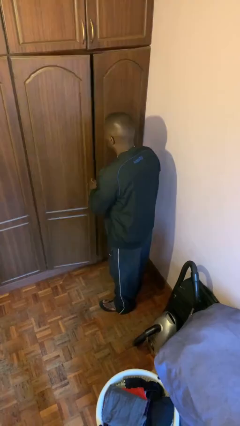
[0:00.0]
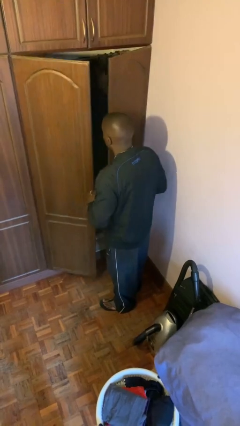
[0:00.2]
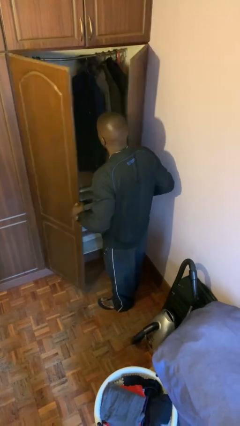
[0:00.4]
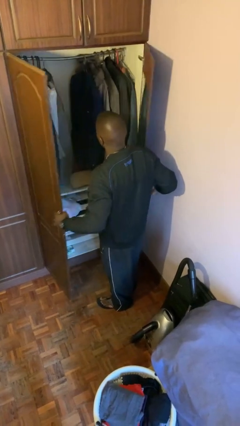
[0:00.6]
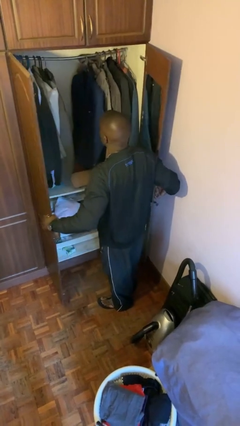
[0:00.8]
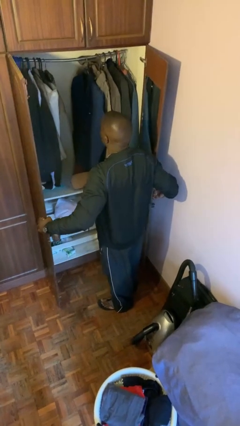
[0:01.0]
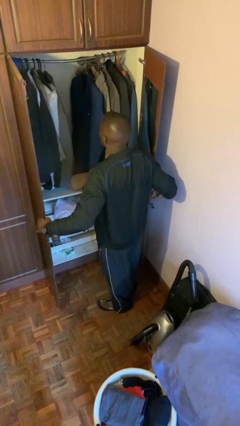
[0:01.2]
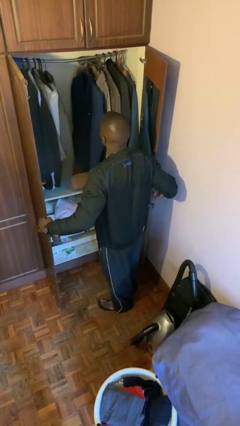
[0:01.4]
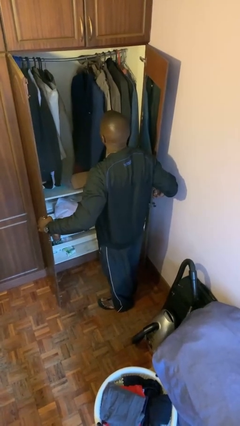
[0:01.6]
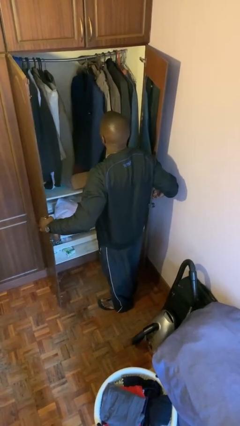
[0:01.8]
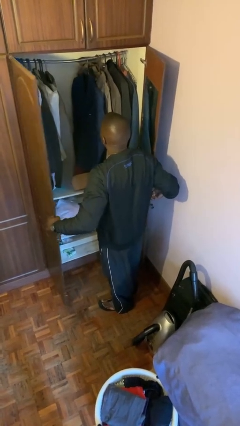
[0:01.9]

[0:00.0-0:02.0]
person opens closet door

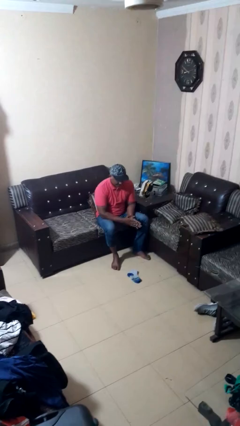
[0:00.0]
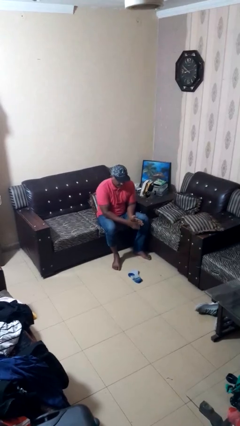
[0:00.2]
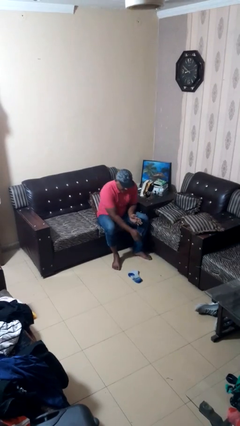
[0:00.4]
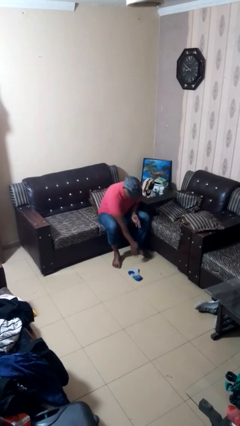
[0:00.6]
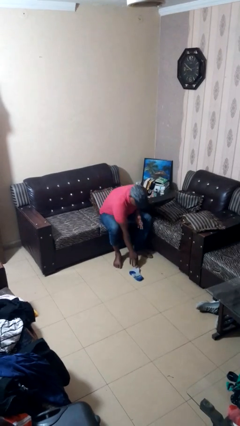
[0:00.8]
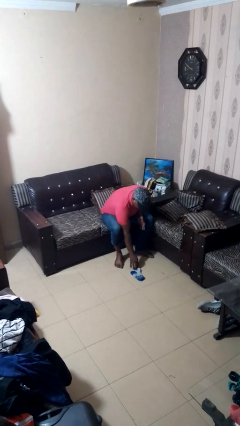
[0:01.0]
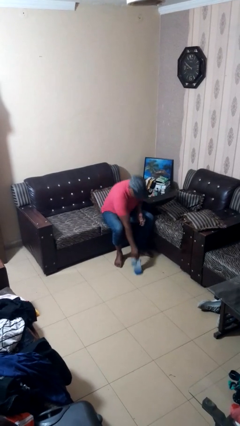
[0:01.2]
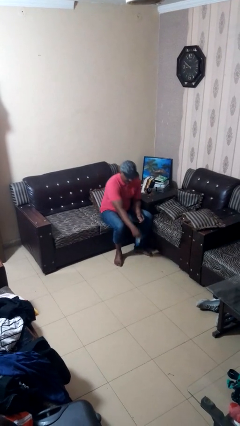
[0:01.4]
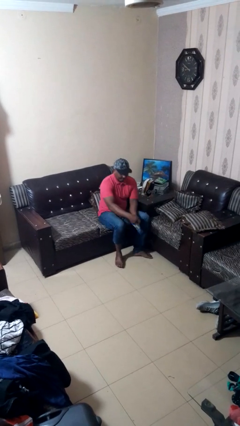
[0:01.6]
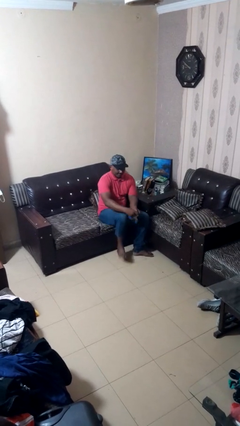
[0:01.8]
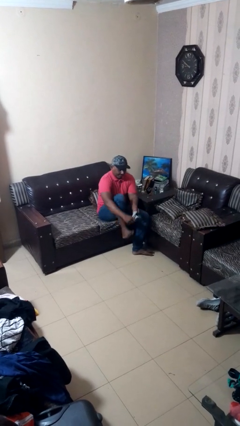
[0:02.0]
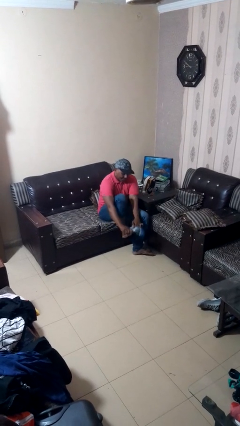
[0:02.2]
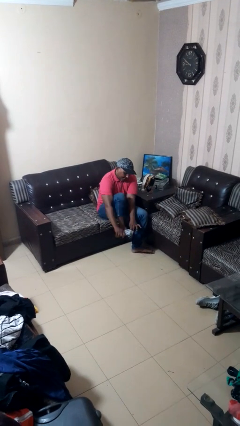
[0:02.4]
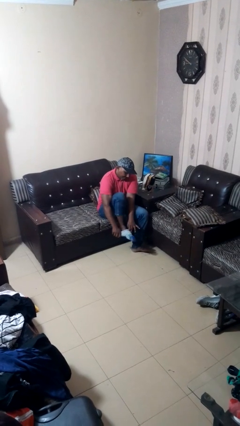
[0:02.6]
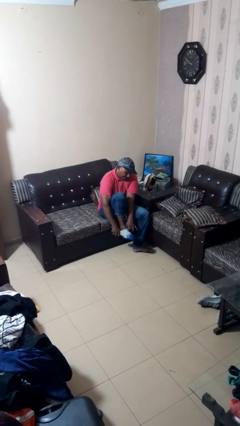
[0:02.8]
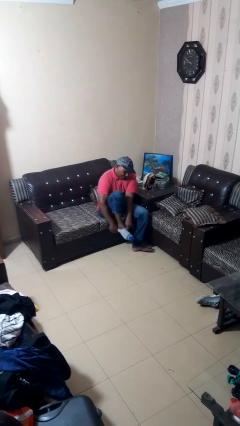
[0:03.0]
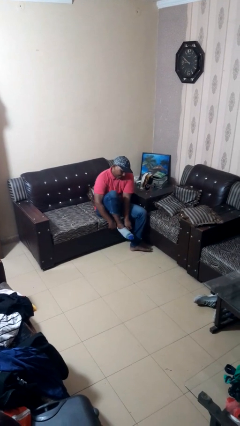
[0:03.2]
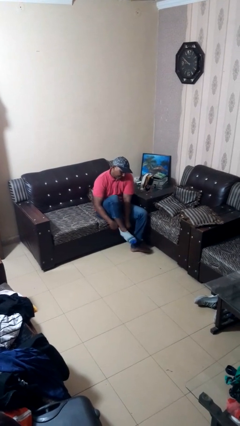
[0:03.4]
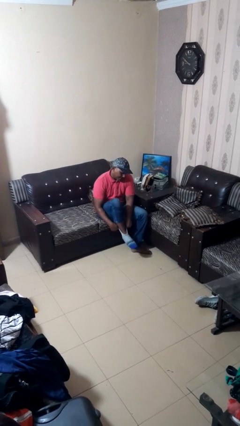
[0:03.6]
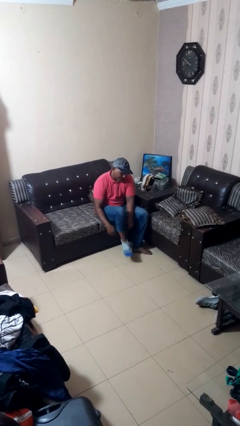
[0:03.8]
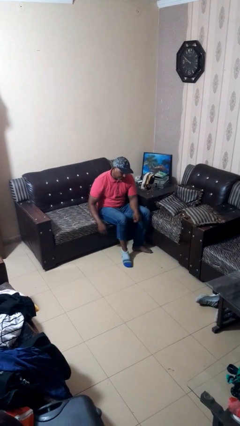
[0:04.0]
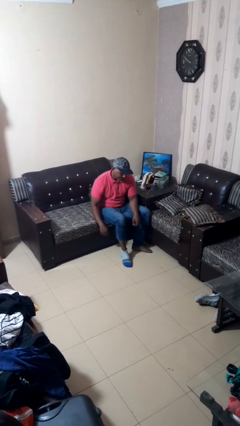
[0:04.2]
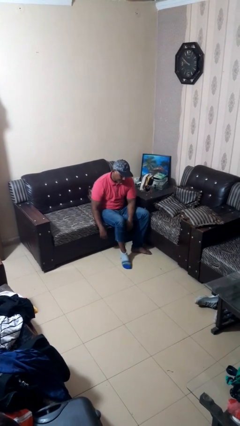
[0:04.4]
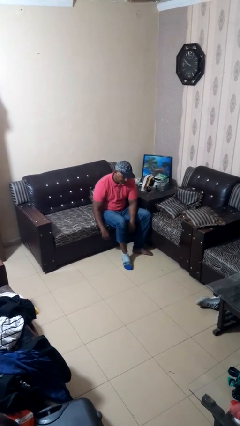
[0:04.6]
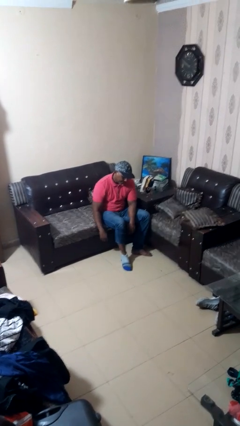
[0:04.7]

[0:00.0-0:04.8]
person puts on socks

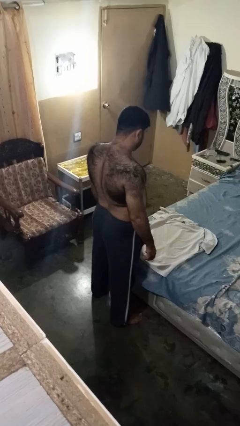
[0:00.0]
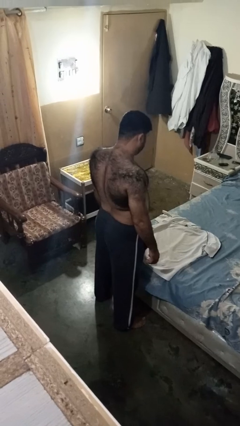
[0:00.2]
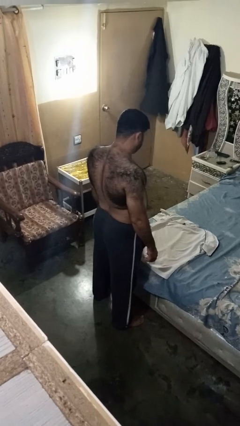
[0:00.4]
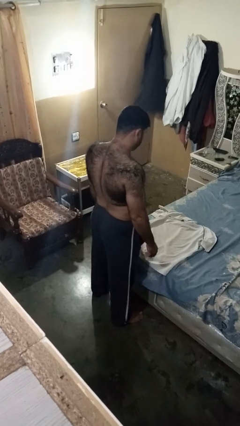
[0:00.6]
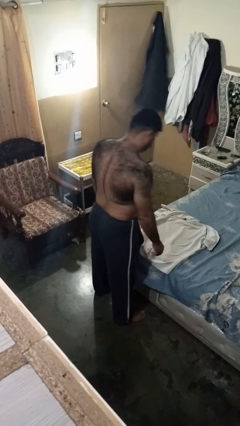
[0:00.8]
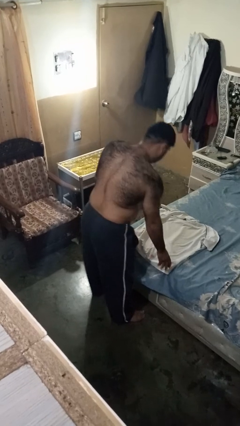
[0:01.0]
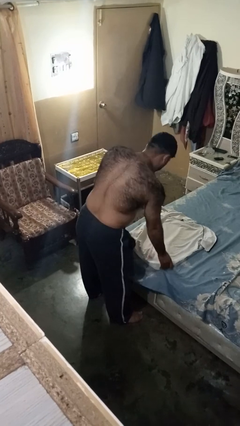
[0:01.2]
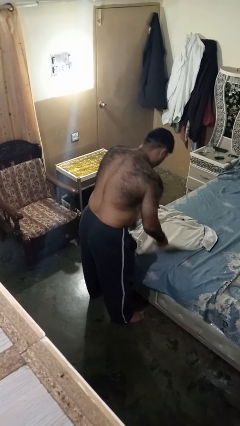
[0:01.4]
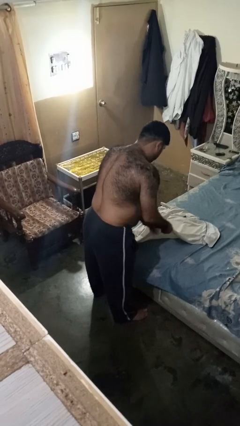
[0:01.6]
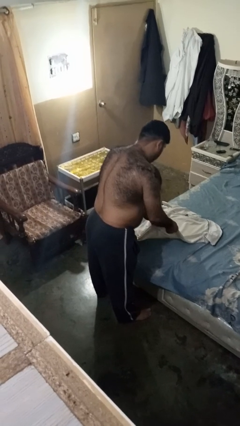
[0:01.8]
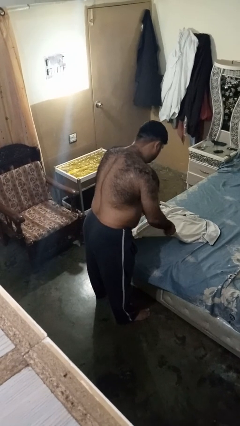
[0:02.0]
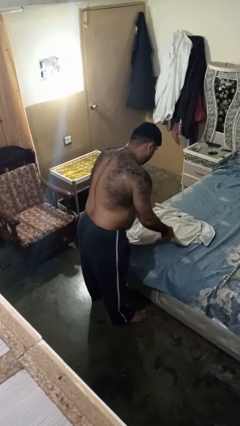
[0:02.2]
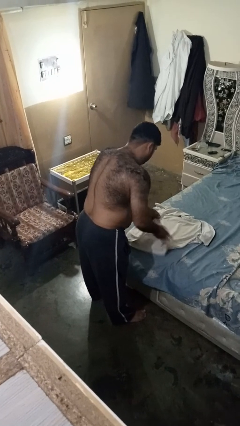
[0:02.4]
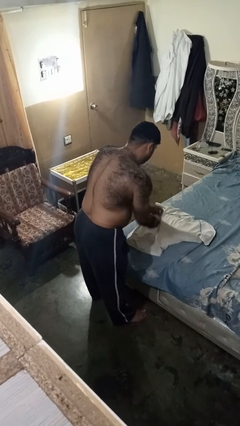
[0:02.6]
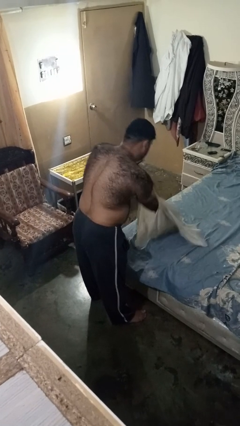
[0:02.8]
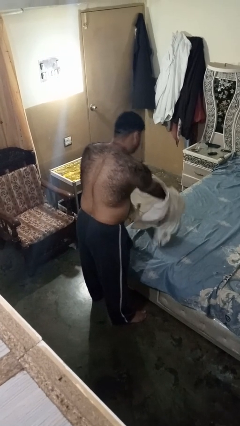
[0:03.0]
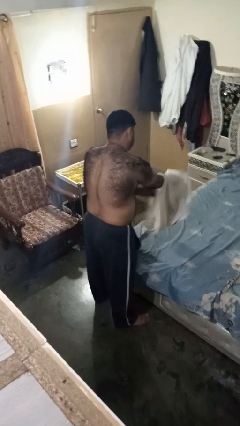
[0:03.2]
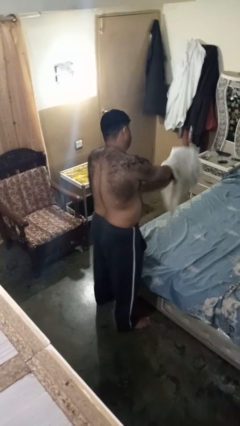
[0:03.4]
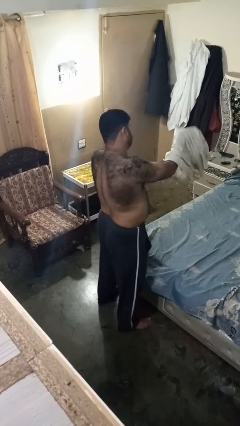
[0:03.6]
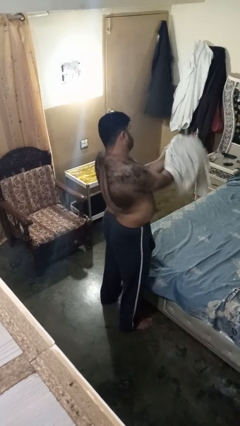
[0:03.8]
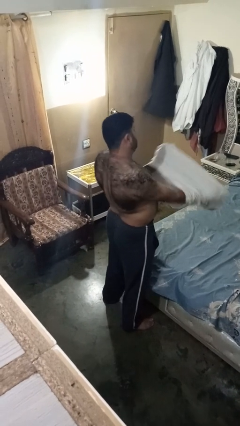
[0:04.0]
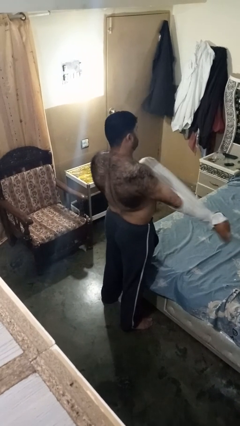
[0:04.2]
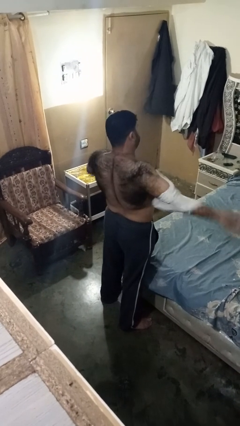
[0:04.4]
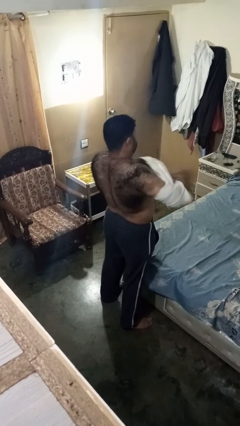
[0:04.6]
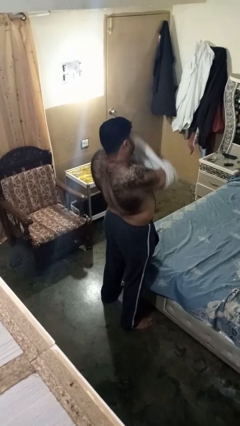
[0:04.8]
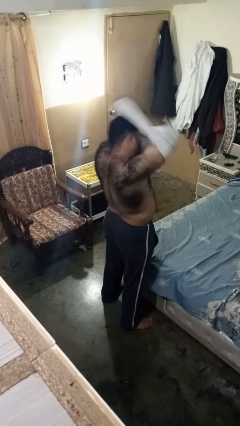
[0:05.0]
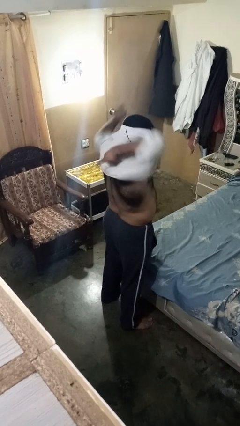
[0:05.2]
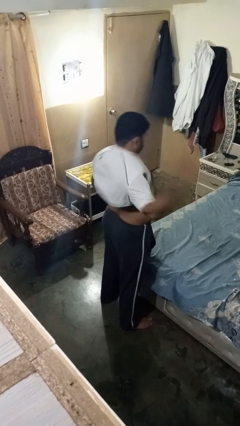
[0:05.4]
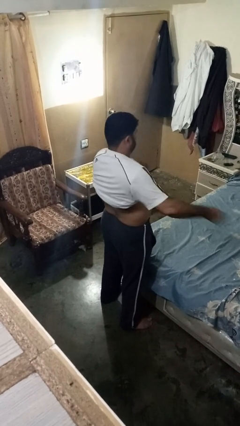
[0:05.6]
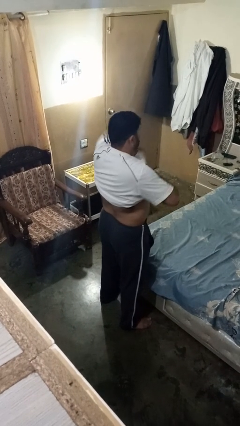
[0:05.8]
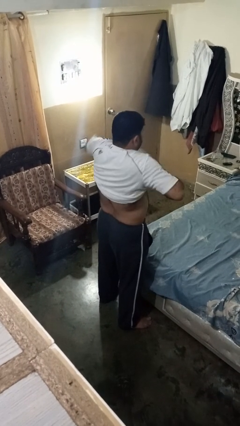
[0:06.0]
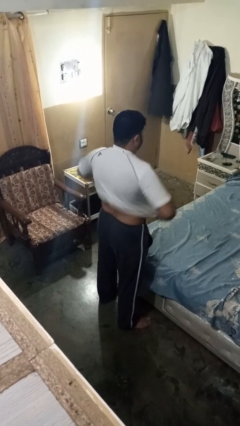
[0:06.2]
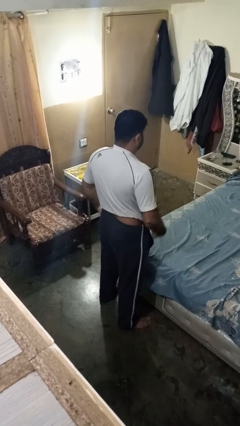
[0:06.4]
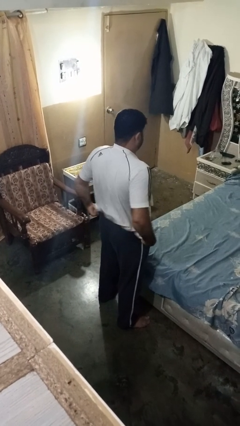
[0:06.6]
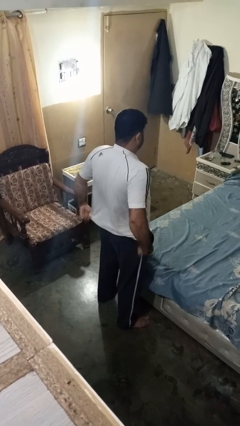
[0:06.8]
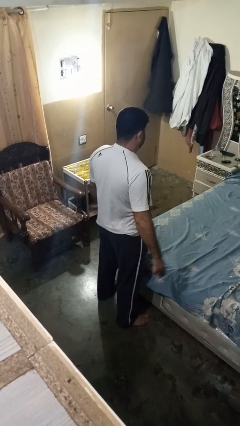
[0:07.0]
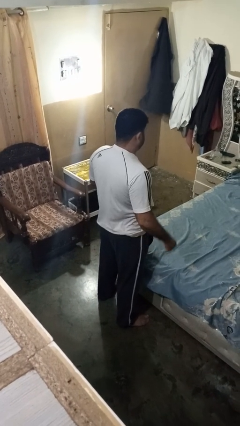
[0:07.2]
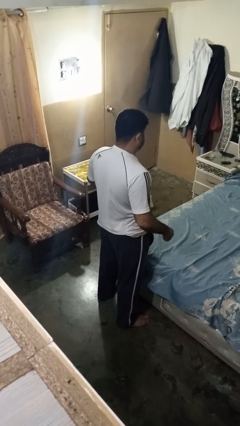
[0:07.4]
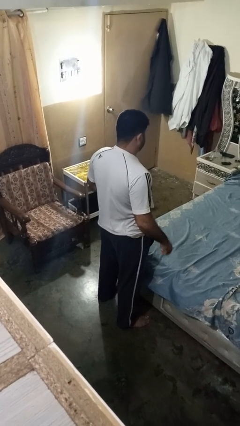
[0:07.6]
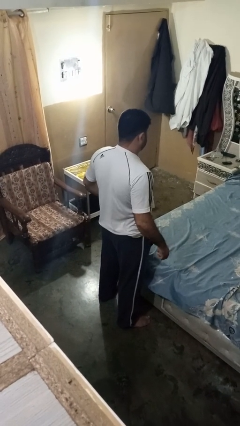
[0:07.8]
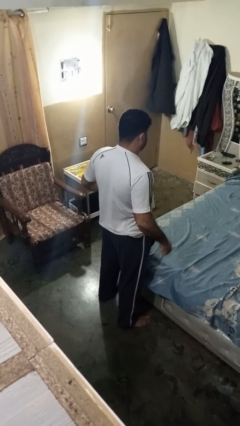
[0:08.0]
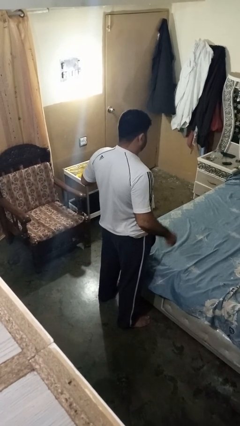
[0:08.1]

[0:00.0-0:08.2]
person puts on shirt

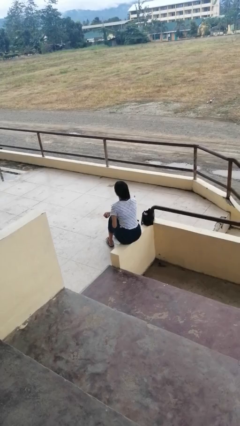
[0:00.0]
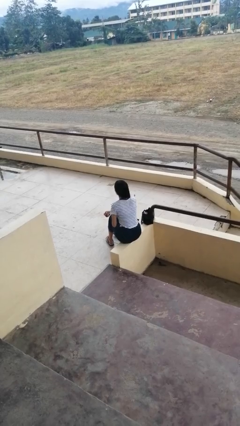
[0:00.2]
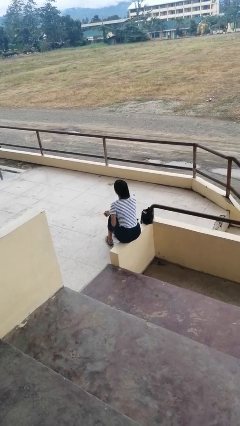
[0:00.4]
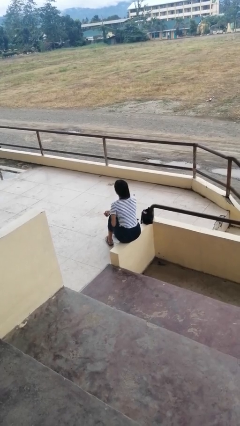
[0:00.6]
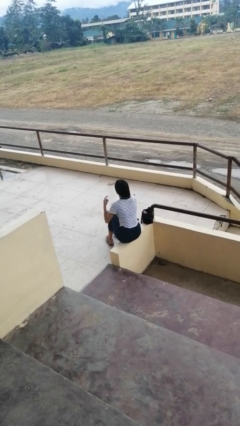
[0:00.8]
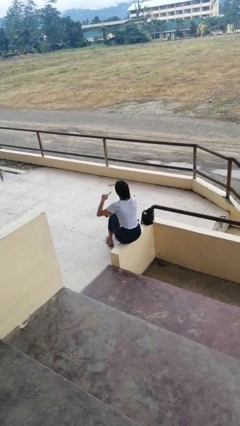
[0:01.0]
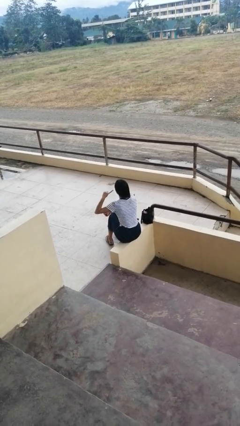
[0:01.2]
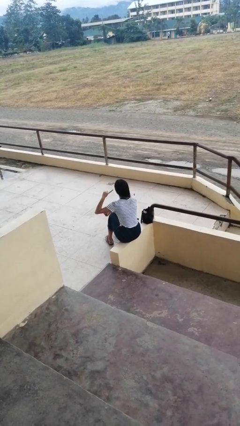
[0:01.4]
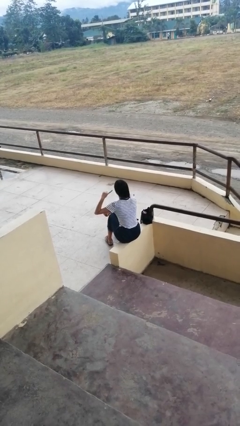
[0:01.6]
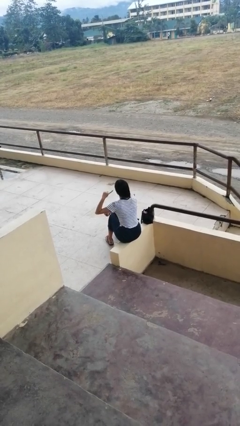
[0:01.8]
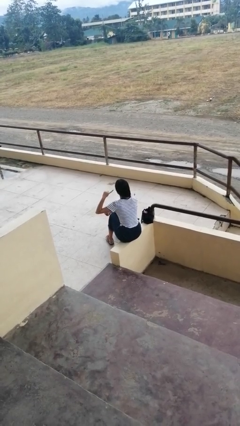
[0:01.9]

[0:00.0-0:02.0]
person gestures listen closely

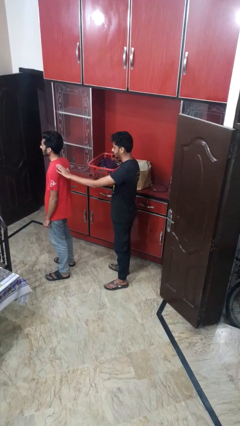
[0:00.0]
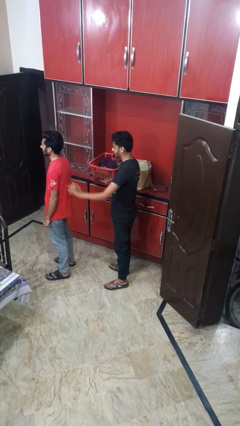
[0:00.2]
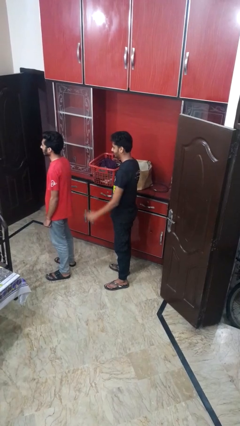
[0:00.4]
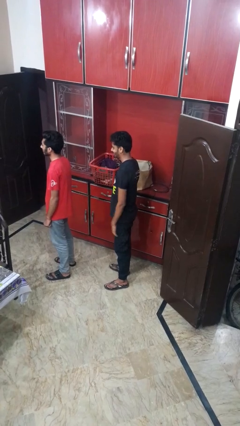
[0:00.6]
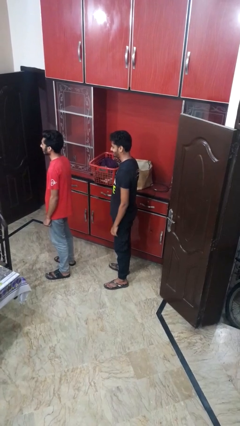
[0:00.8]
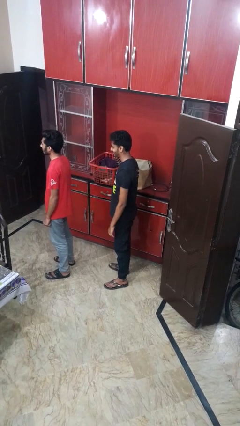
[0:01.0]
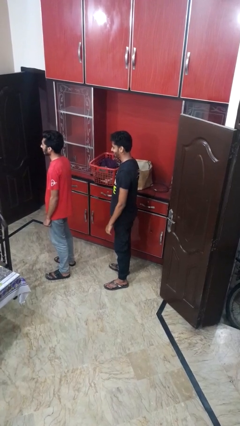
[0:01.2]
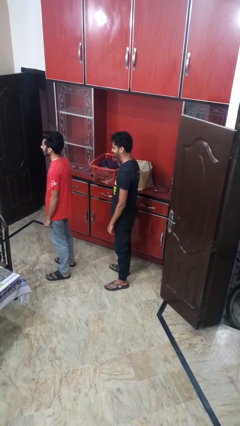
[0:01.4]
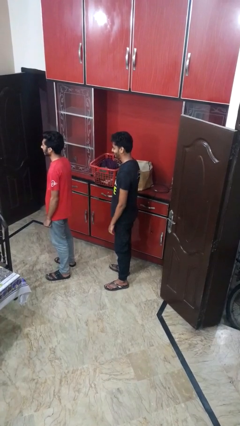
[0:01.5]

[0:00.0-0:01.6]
person gestures come here
